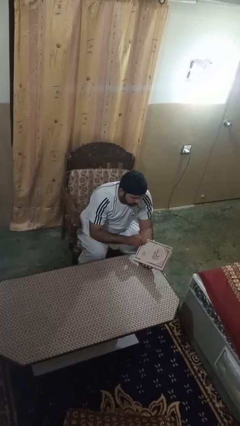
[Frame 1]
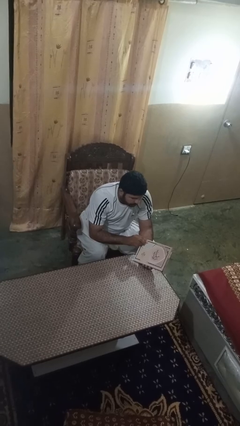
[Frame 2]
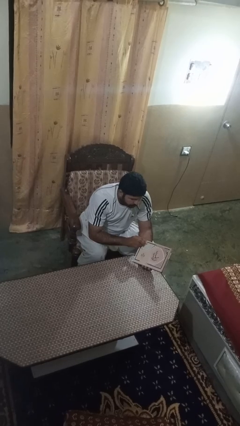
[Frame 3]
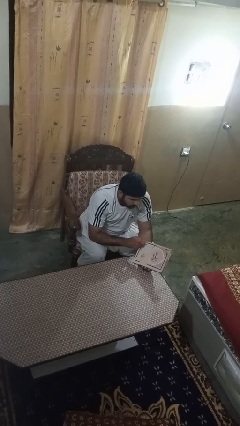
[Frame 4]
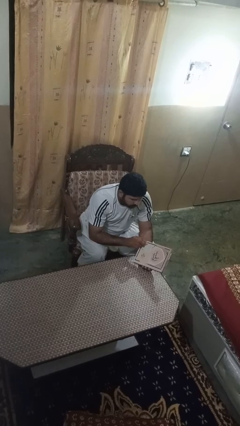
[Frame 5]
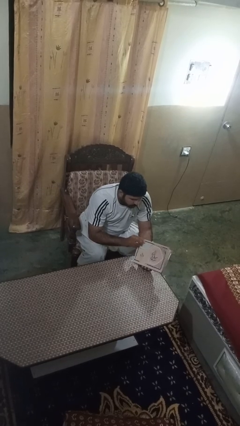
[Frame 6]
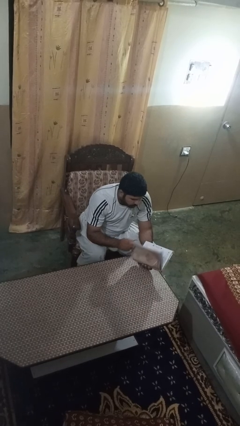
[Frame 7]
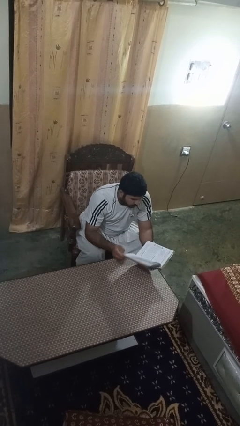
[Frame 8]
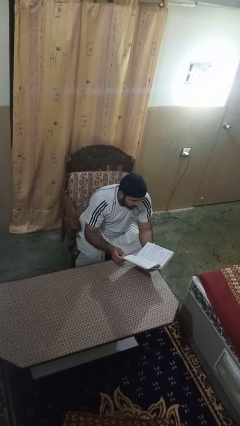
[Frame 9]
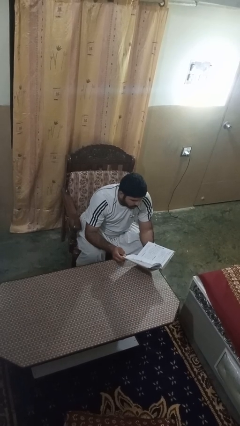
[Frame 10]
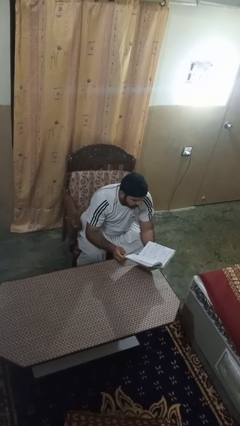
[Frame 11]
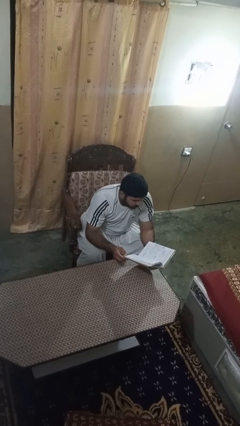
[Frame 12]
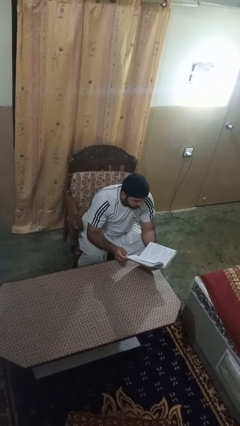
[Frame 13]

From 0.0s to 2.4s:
person reads book

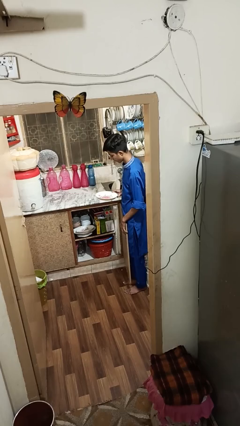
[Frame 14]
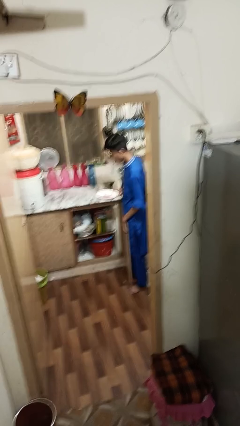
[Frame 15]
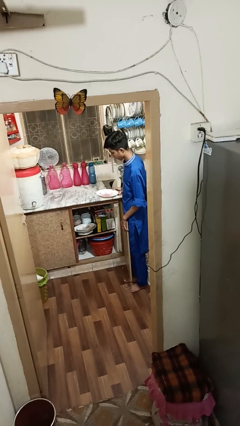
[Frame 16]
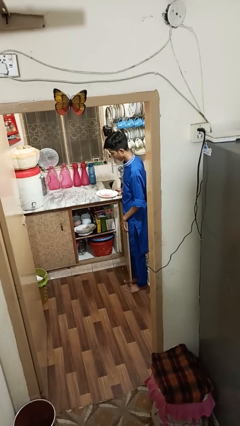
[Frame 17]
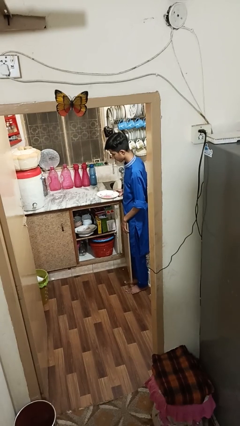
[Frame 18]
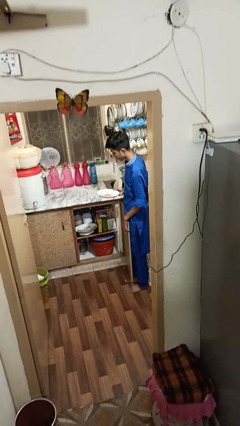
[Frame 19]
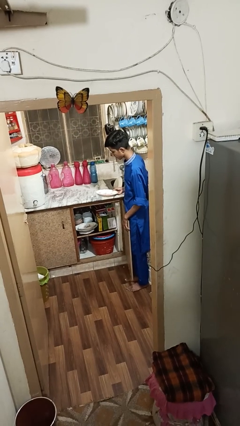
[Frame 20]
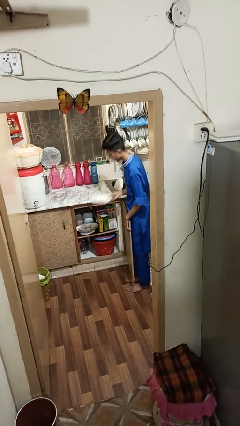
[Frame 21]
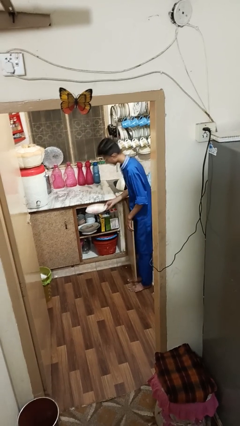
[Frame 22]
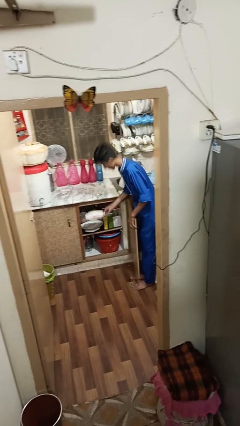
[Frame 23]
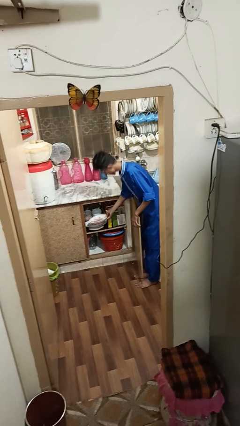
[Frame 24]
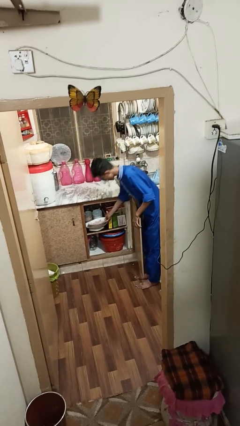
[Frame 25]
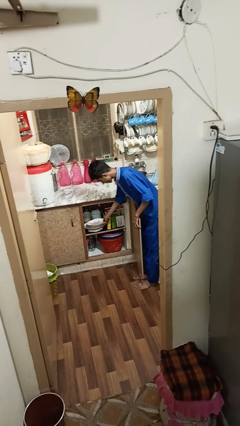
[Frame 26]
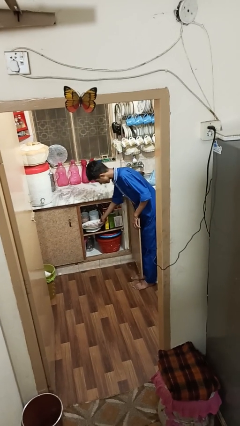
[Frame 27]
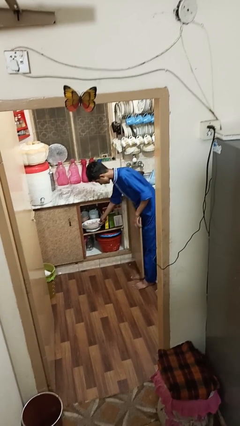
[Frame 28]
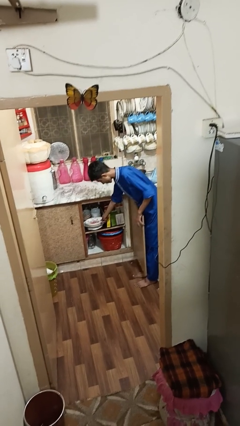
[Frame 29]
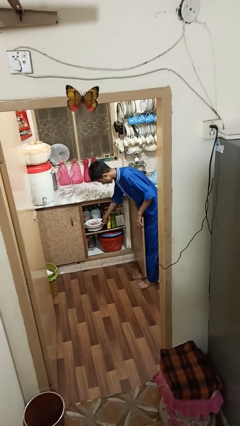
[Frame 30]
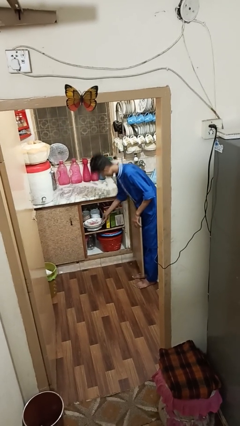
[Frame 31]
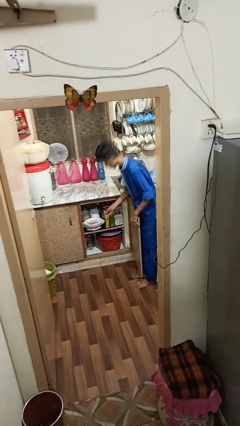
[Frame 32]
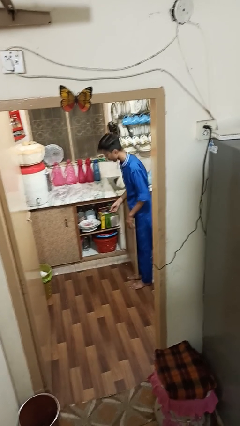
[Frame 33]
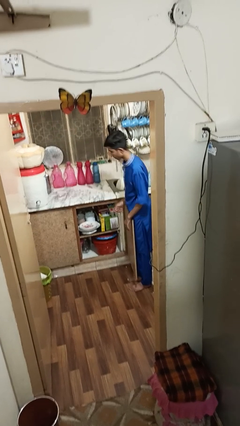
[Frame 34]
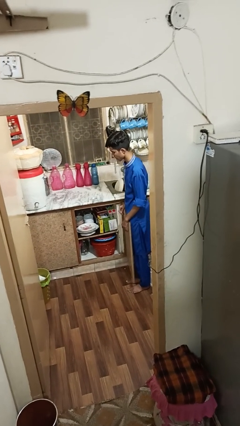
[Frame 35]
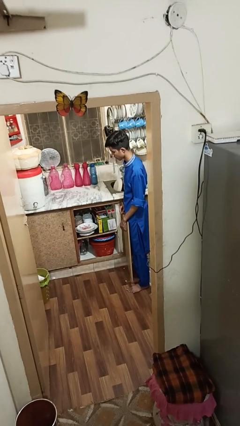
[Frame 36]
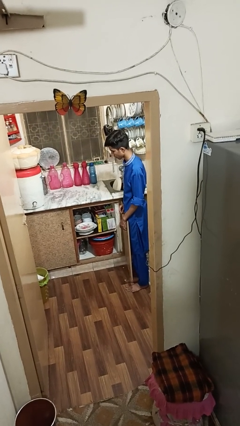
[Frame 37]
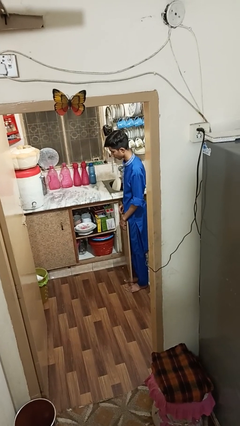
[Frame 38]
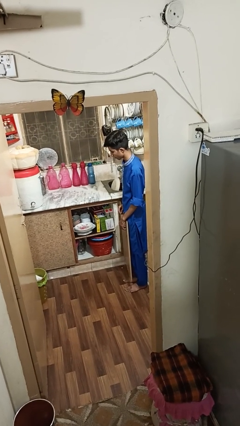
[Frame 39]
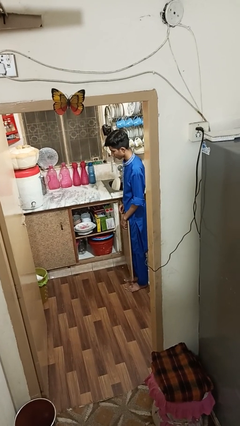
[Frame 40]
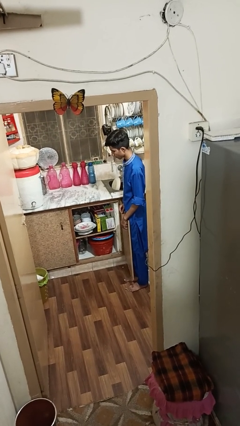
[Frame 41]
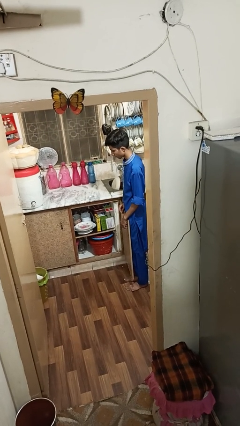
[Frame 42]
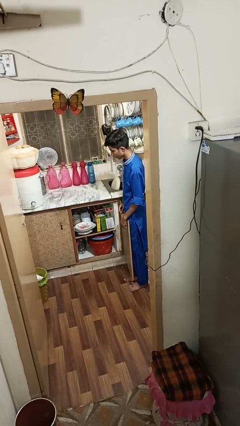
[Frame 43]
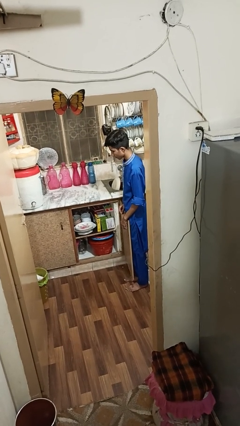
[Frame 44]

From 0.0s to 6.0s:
person puts object in cabinet

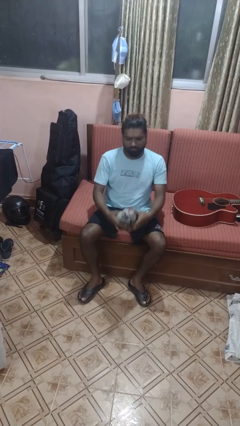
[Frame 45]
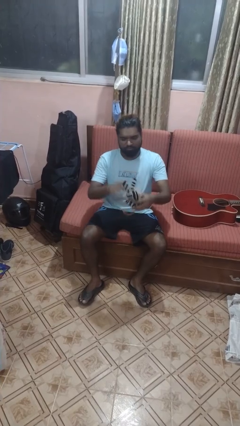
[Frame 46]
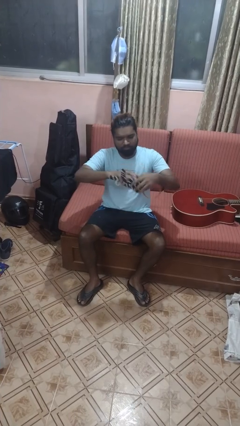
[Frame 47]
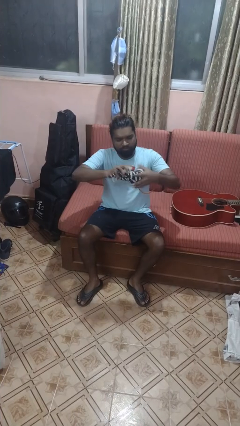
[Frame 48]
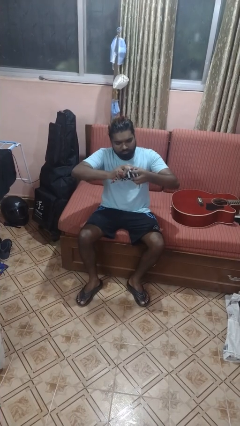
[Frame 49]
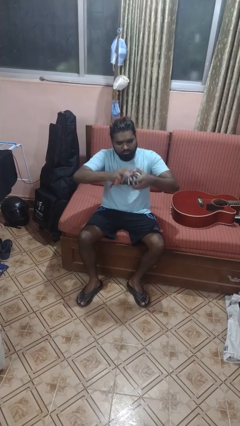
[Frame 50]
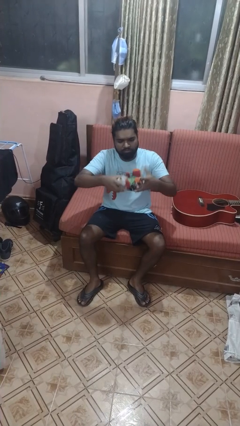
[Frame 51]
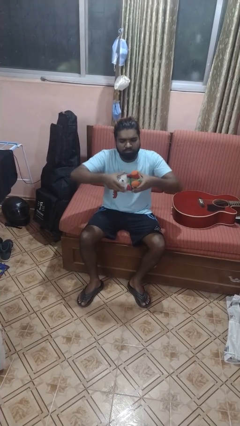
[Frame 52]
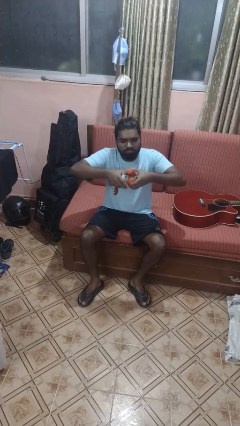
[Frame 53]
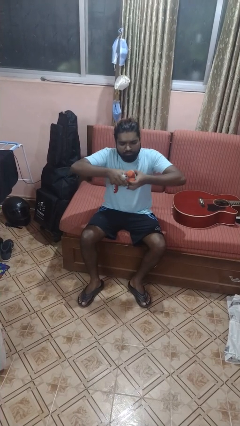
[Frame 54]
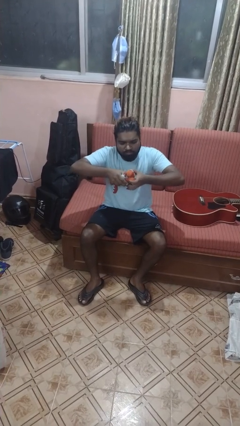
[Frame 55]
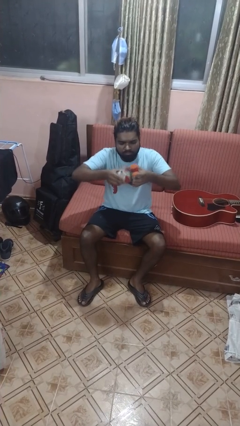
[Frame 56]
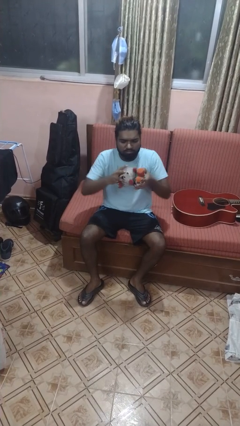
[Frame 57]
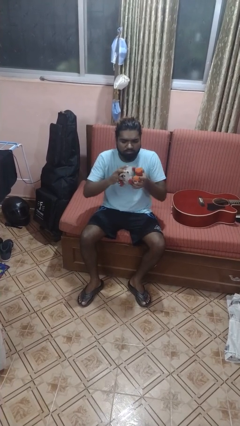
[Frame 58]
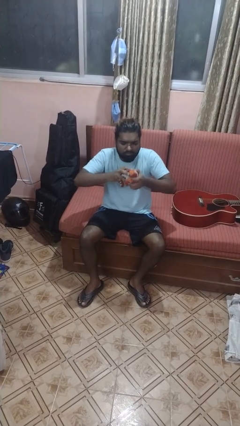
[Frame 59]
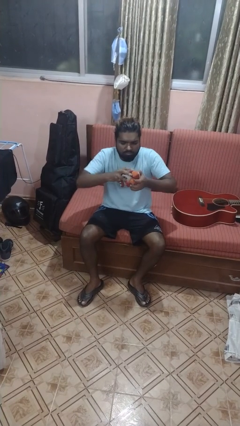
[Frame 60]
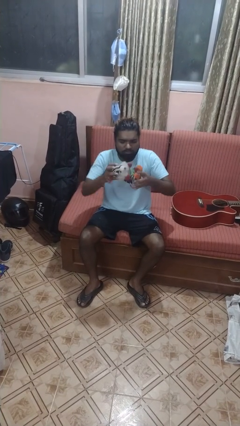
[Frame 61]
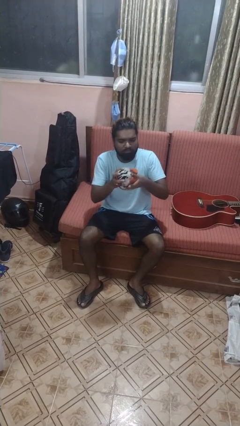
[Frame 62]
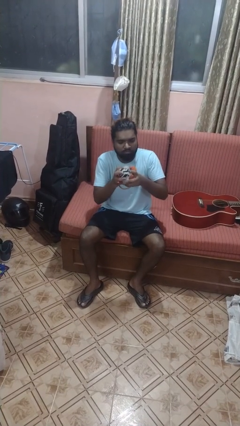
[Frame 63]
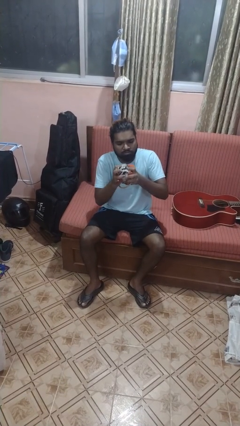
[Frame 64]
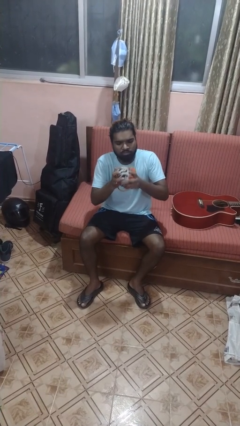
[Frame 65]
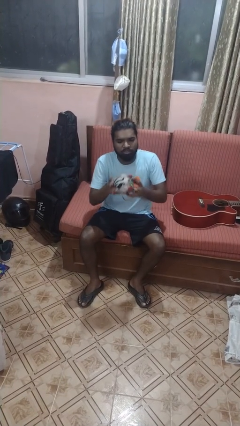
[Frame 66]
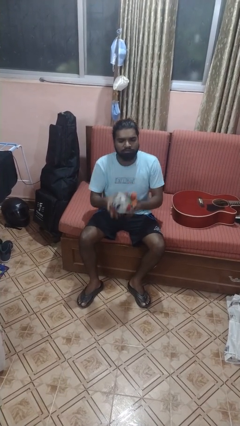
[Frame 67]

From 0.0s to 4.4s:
person squeezes object

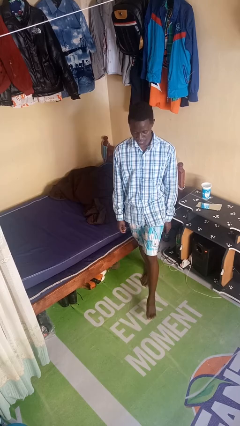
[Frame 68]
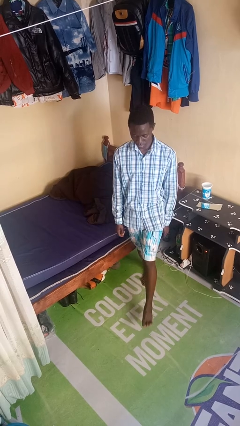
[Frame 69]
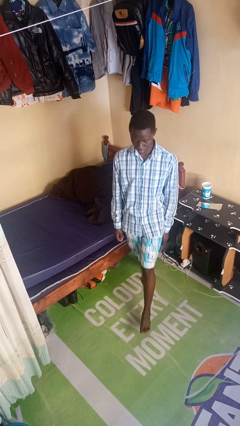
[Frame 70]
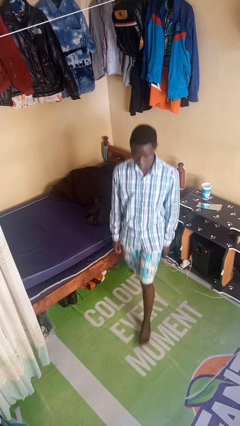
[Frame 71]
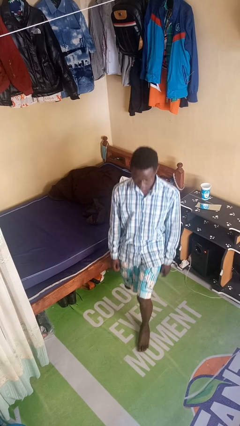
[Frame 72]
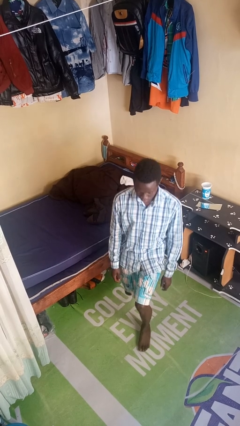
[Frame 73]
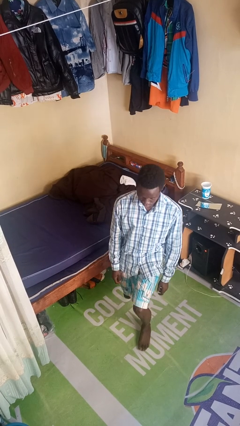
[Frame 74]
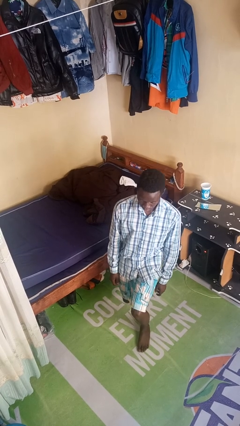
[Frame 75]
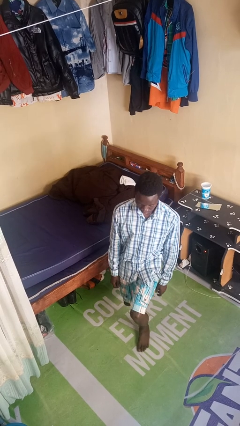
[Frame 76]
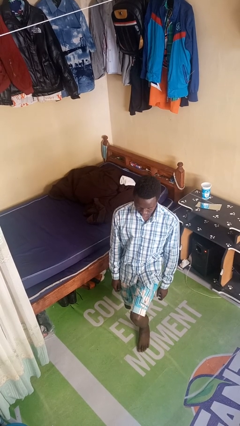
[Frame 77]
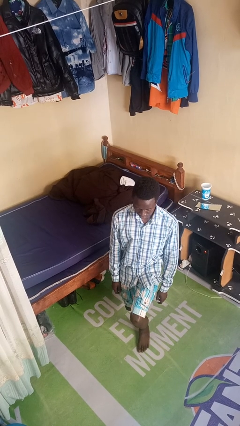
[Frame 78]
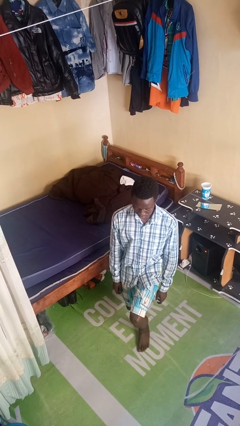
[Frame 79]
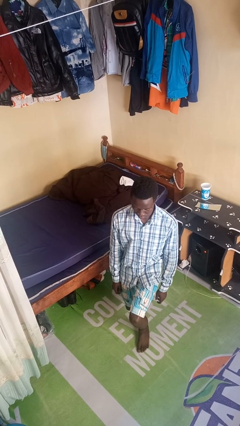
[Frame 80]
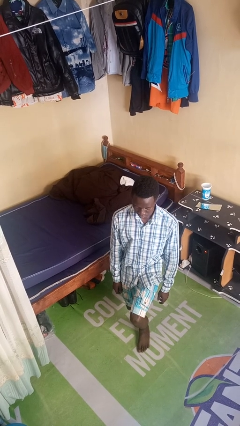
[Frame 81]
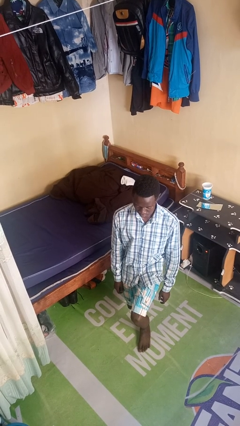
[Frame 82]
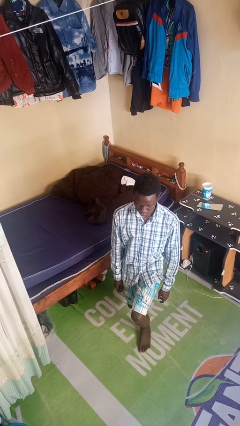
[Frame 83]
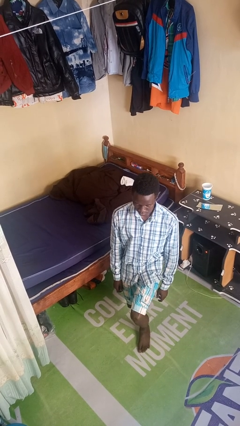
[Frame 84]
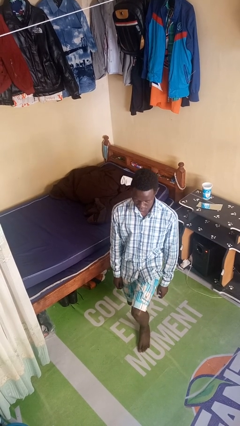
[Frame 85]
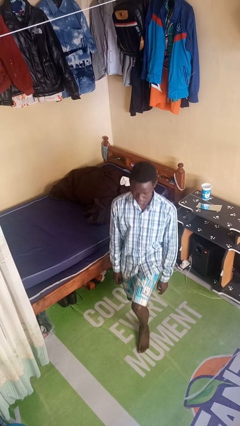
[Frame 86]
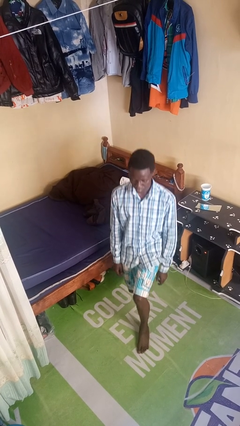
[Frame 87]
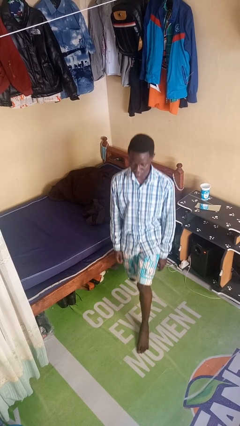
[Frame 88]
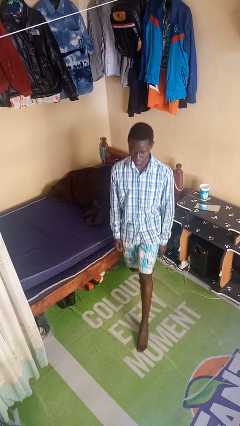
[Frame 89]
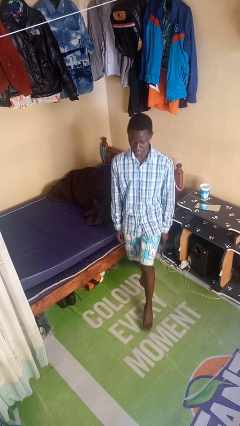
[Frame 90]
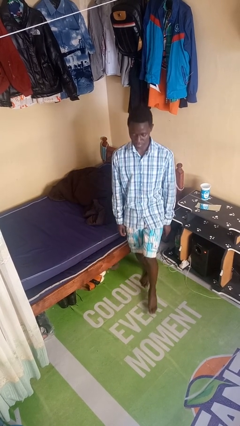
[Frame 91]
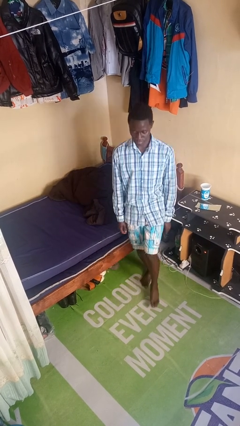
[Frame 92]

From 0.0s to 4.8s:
person exercises with lunges

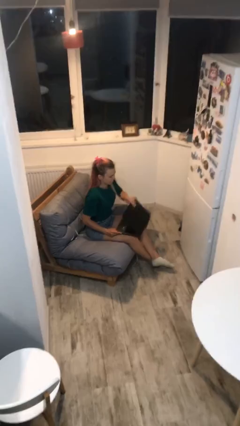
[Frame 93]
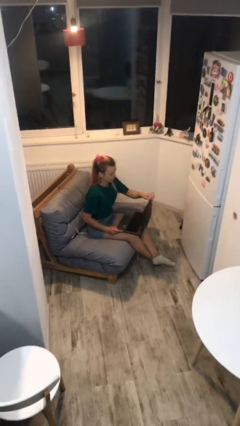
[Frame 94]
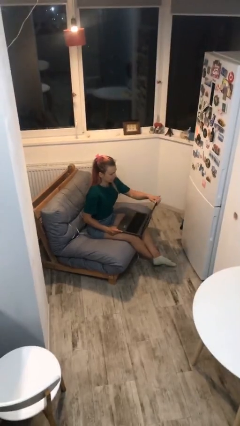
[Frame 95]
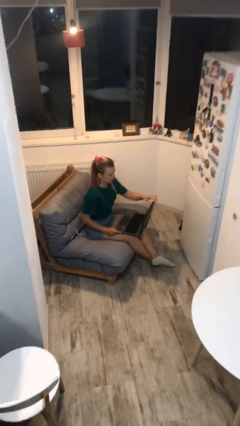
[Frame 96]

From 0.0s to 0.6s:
person opens laptop
